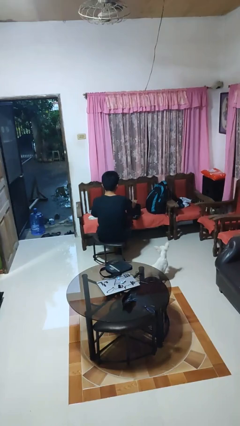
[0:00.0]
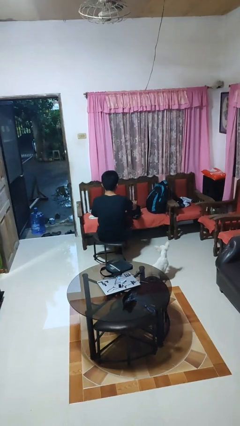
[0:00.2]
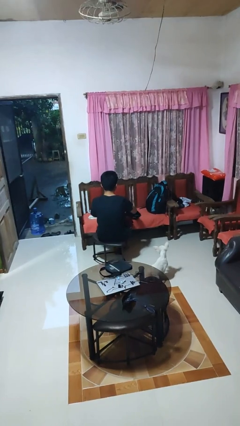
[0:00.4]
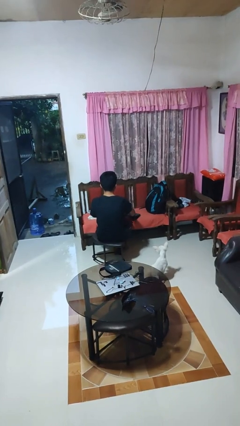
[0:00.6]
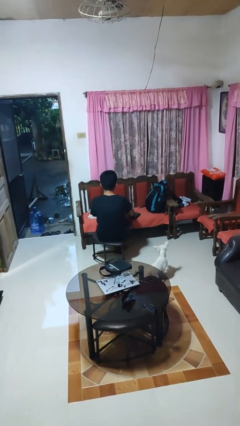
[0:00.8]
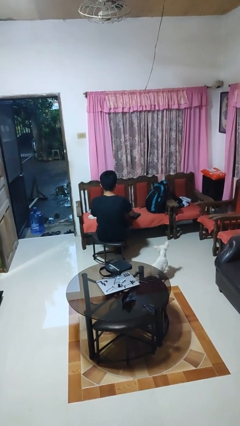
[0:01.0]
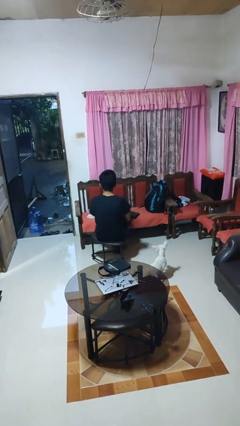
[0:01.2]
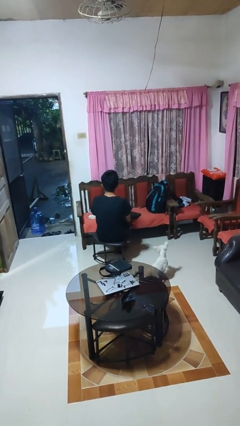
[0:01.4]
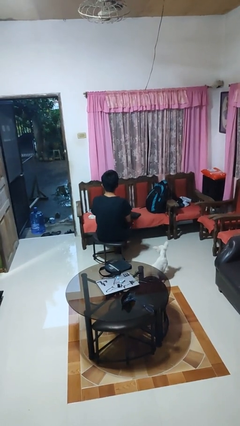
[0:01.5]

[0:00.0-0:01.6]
person closes laptop

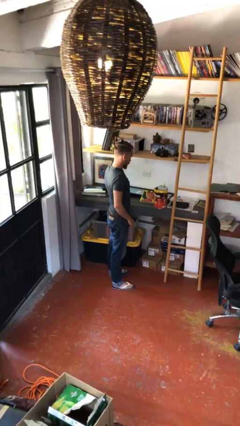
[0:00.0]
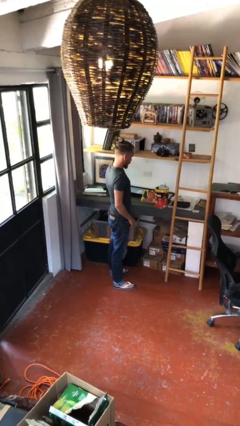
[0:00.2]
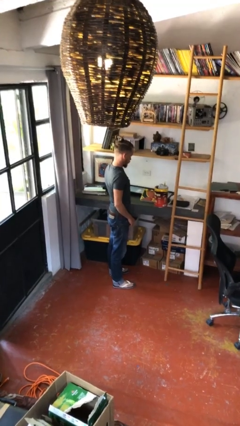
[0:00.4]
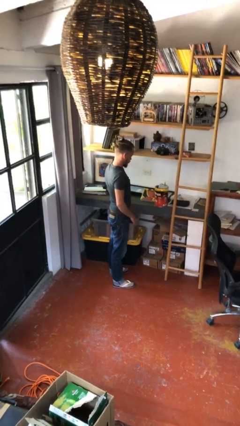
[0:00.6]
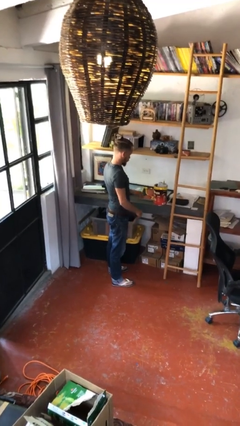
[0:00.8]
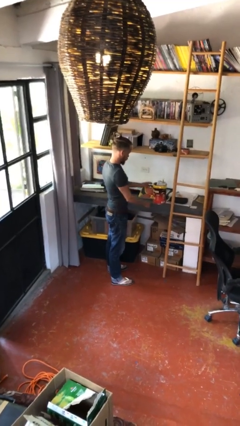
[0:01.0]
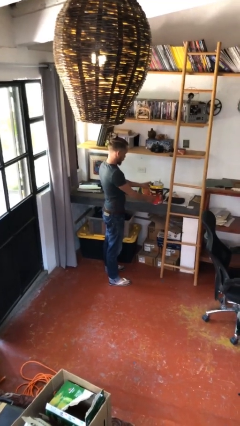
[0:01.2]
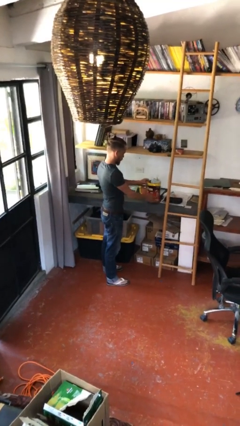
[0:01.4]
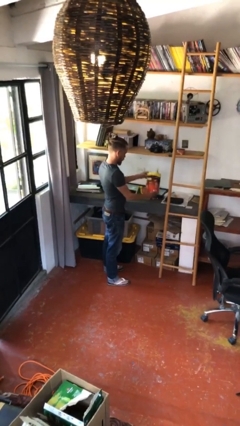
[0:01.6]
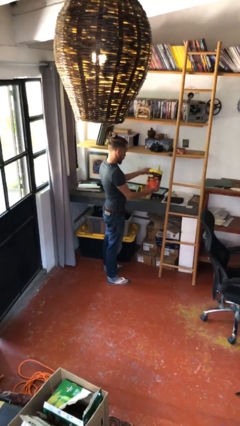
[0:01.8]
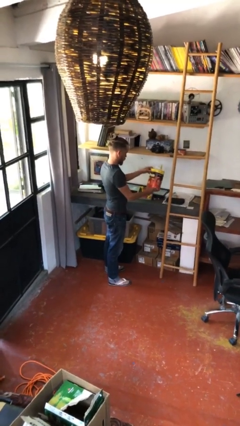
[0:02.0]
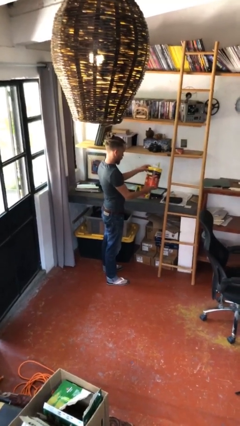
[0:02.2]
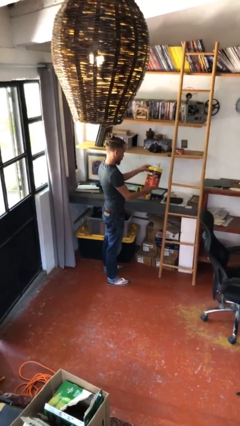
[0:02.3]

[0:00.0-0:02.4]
person picks up object from table

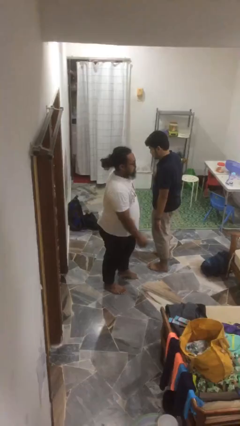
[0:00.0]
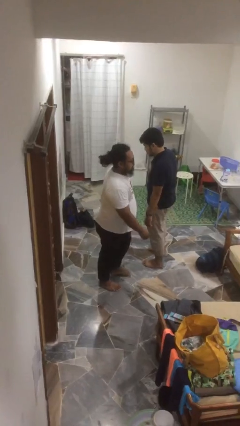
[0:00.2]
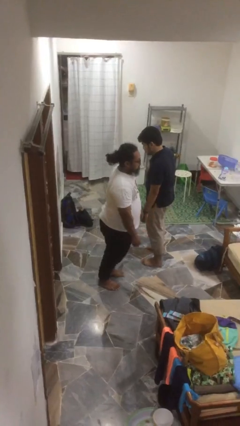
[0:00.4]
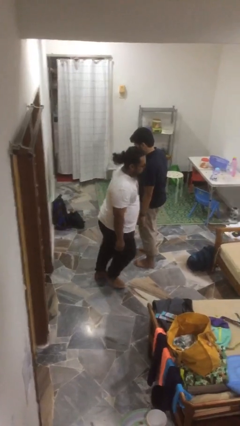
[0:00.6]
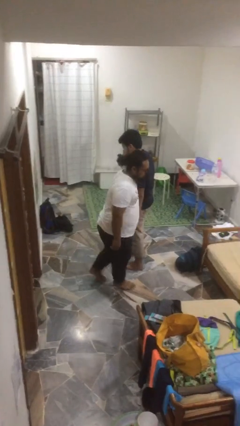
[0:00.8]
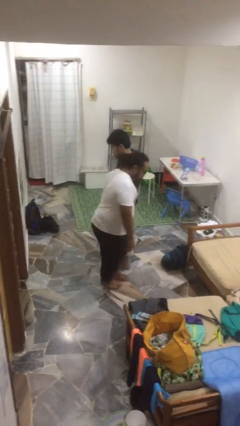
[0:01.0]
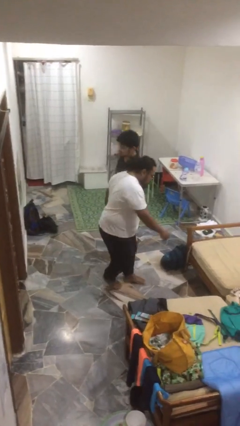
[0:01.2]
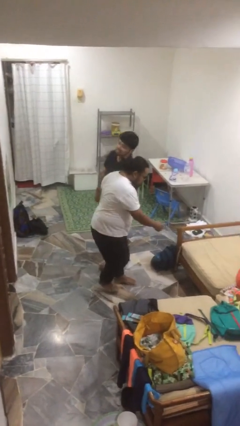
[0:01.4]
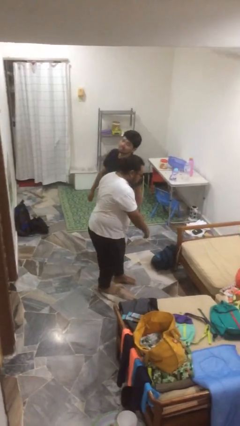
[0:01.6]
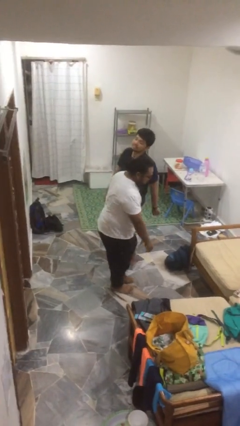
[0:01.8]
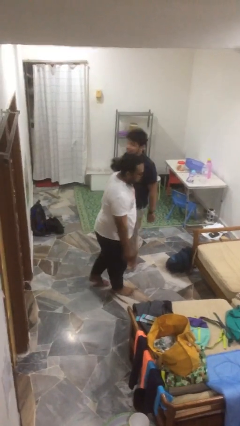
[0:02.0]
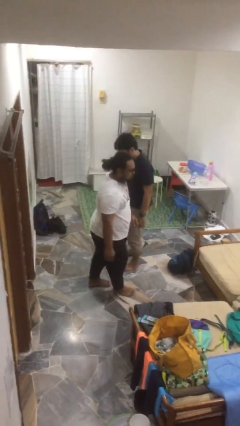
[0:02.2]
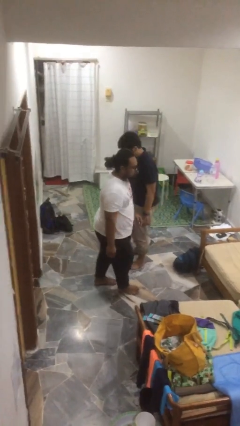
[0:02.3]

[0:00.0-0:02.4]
person bumps into person

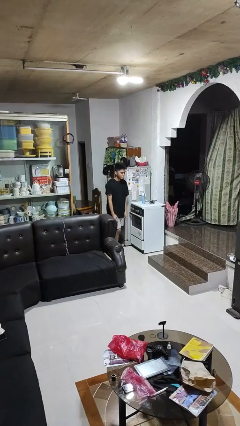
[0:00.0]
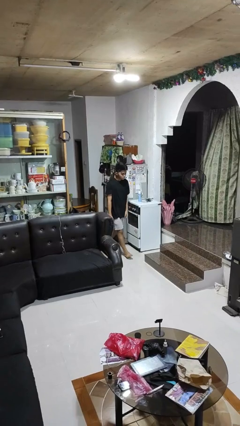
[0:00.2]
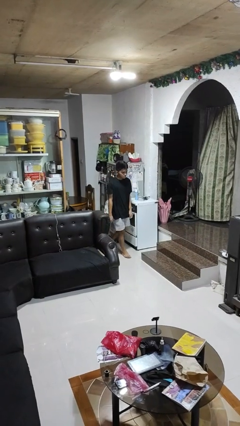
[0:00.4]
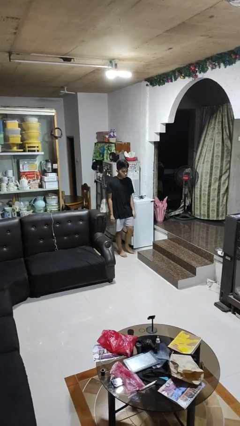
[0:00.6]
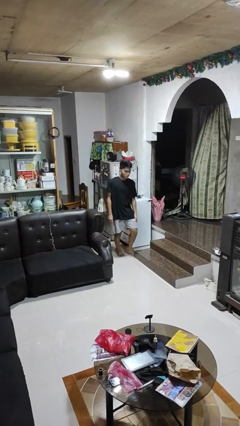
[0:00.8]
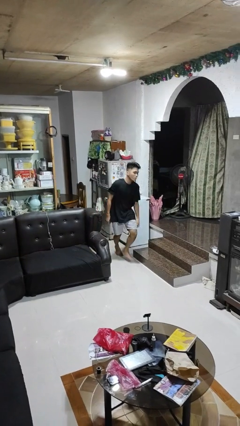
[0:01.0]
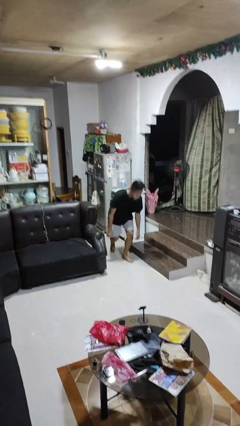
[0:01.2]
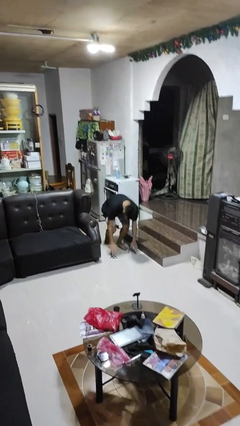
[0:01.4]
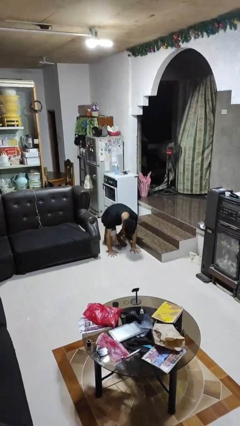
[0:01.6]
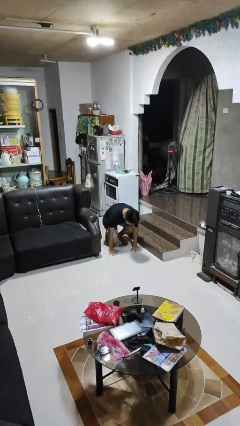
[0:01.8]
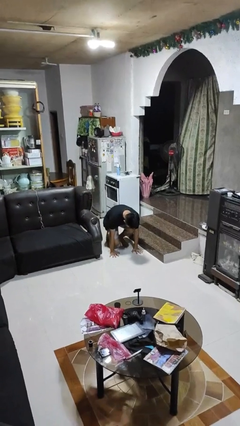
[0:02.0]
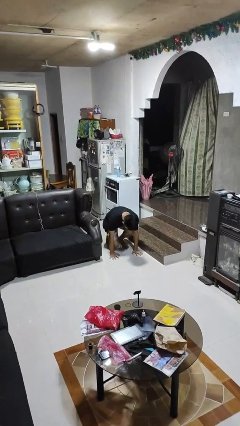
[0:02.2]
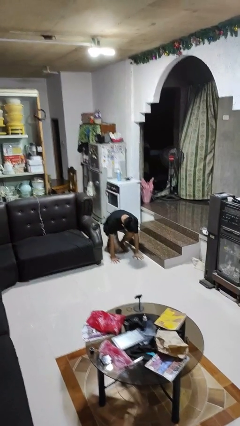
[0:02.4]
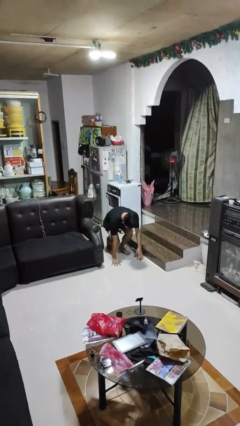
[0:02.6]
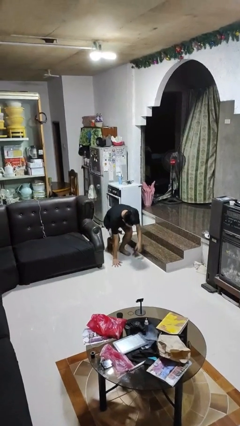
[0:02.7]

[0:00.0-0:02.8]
person trips on object on floor

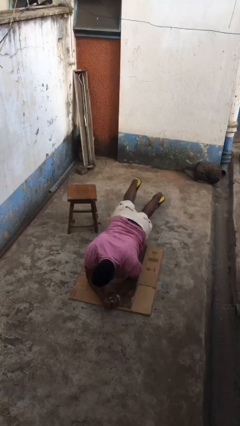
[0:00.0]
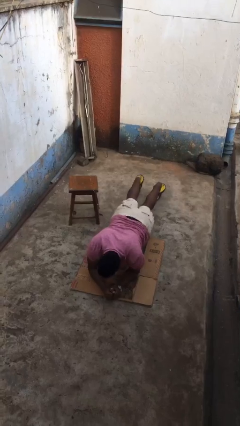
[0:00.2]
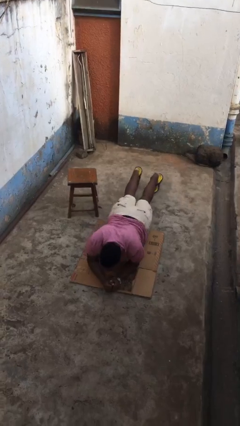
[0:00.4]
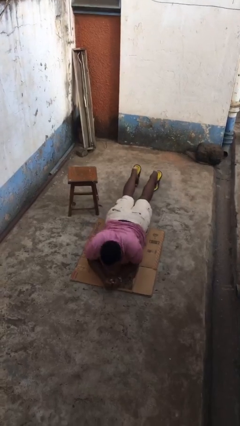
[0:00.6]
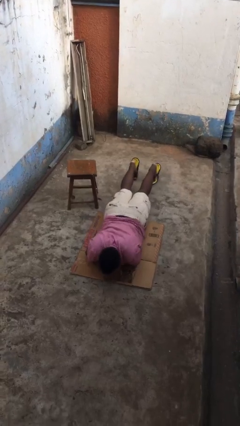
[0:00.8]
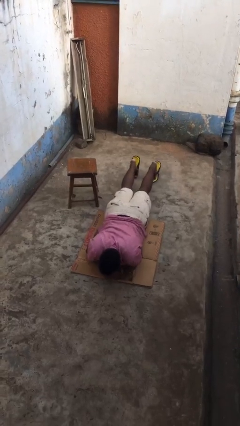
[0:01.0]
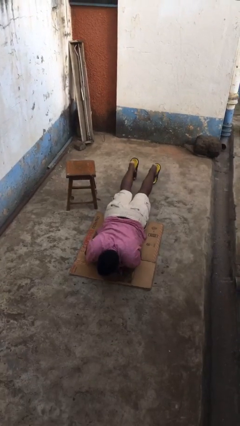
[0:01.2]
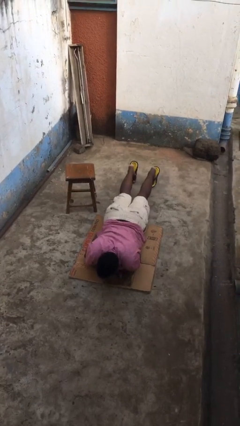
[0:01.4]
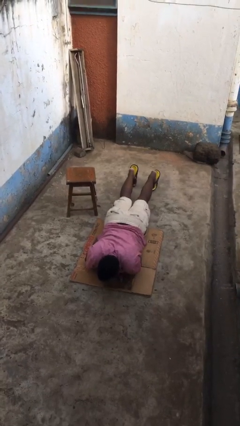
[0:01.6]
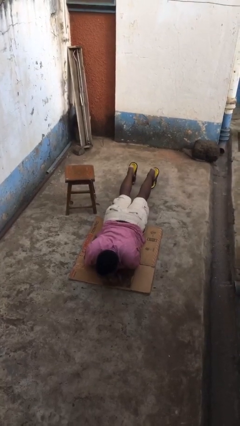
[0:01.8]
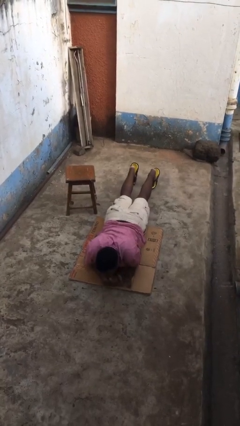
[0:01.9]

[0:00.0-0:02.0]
person lies down on floor

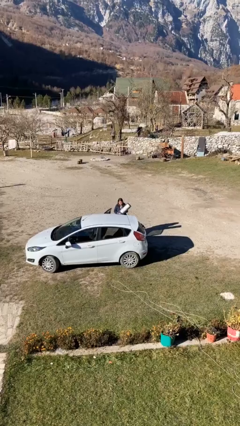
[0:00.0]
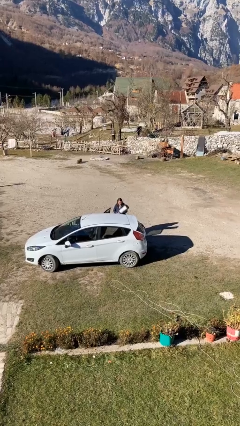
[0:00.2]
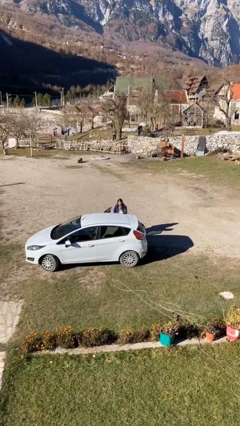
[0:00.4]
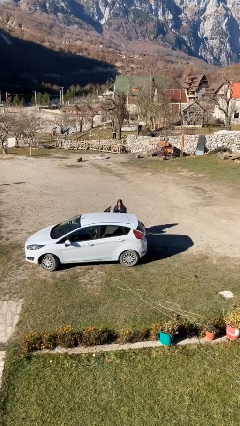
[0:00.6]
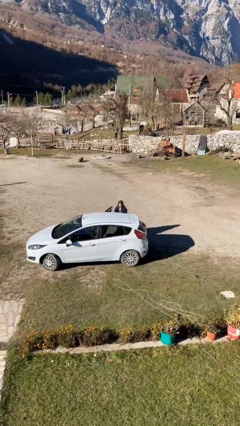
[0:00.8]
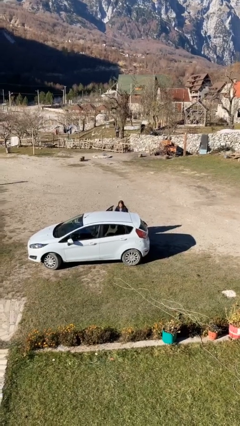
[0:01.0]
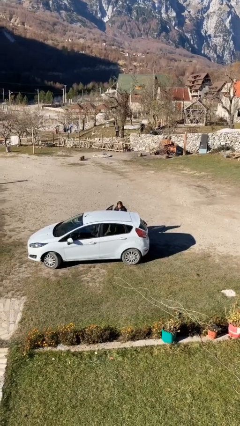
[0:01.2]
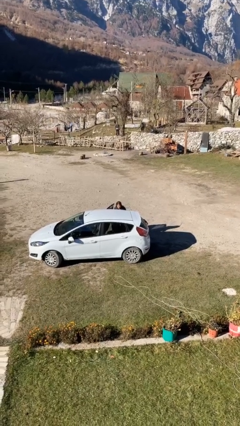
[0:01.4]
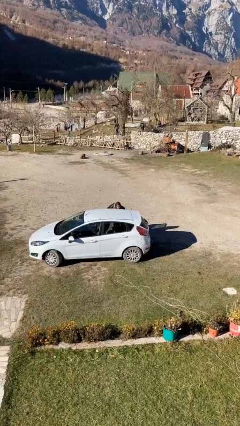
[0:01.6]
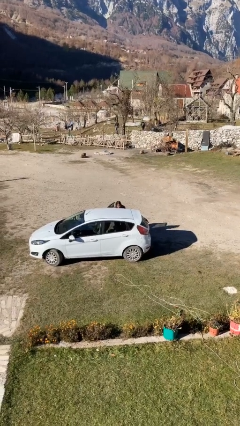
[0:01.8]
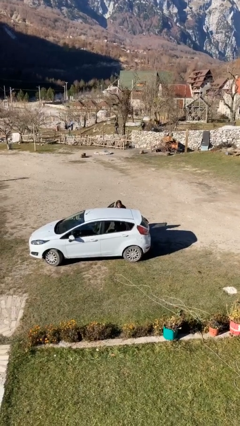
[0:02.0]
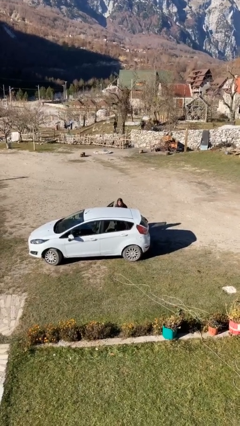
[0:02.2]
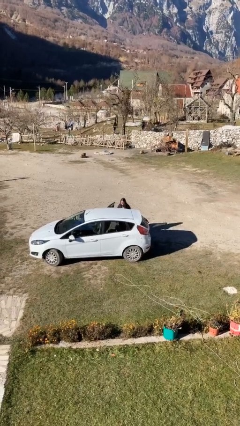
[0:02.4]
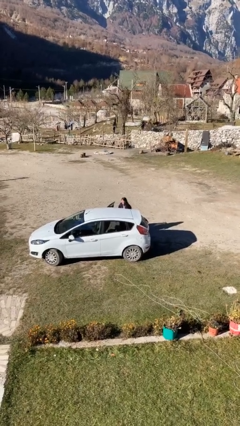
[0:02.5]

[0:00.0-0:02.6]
person loads car

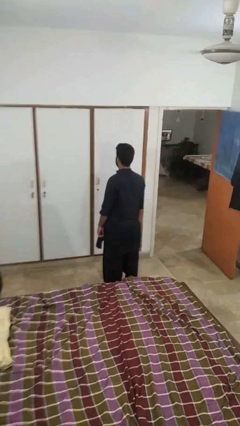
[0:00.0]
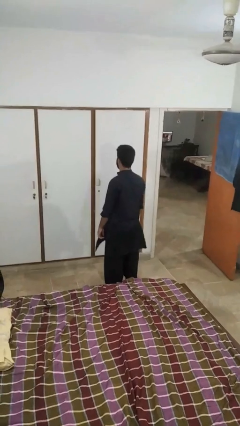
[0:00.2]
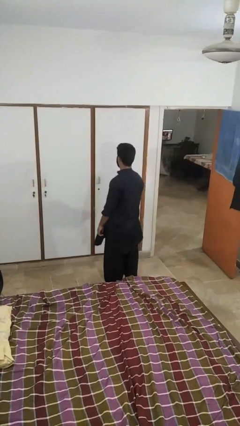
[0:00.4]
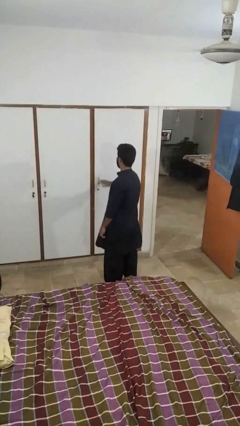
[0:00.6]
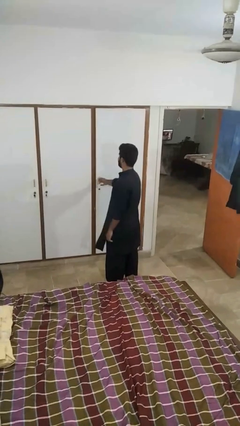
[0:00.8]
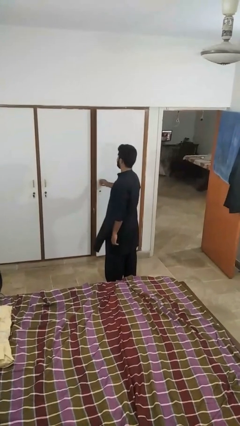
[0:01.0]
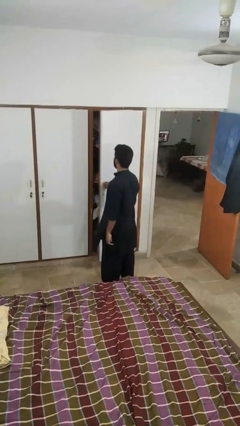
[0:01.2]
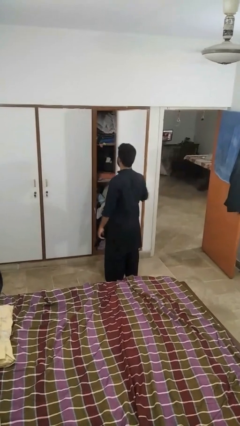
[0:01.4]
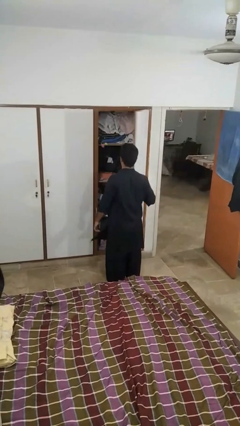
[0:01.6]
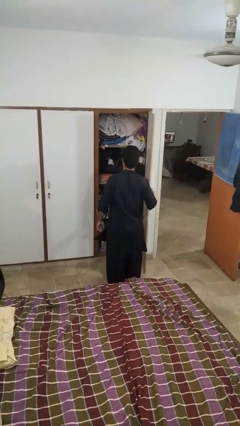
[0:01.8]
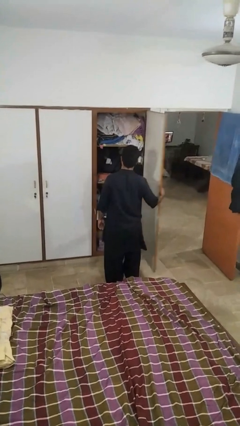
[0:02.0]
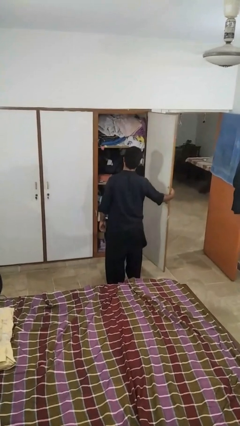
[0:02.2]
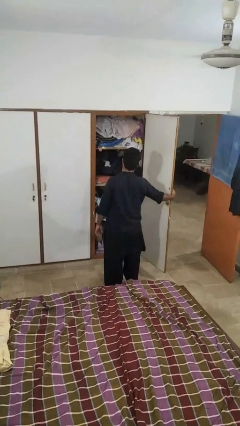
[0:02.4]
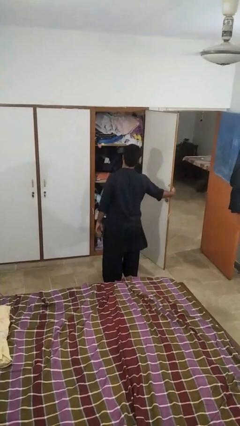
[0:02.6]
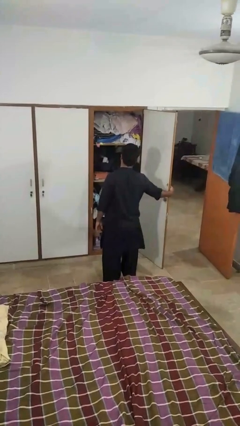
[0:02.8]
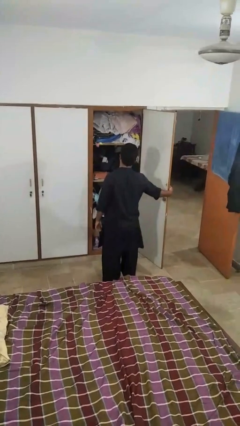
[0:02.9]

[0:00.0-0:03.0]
person opens closet door
